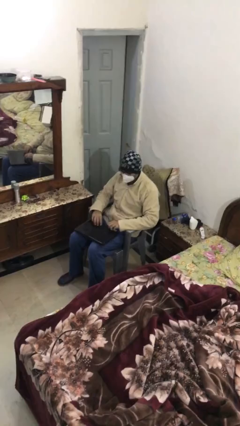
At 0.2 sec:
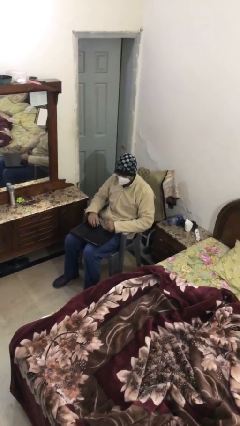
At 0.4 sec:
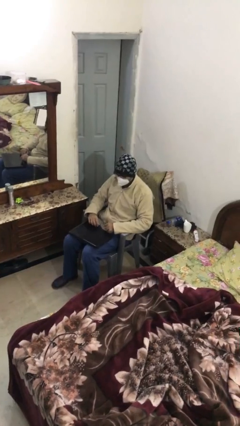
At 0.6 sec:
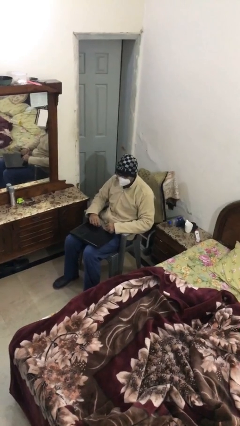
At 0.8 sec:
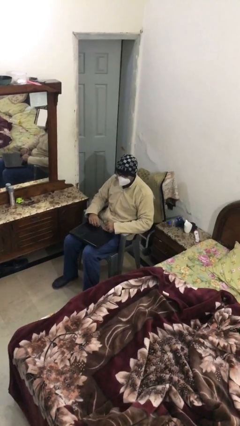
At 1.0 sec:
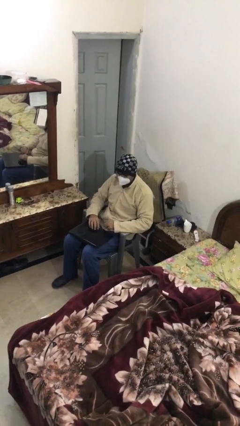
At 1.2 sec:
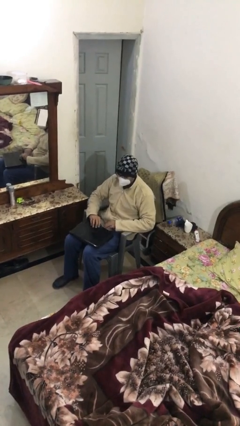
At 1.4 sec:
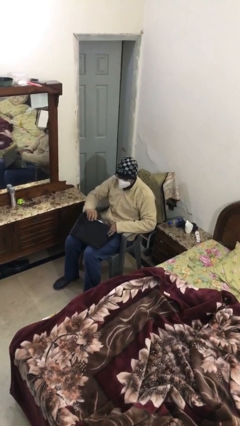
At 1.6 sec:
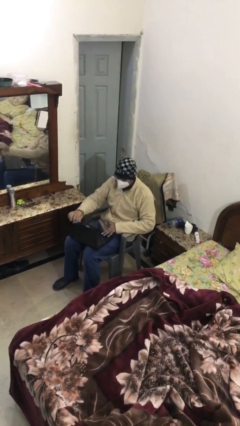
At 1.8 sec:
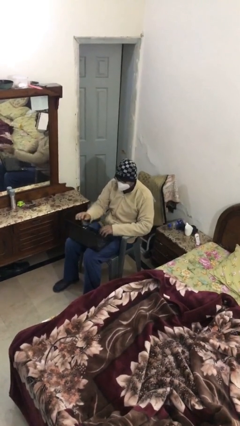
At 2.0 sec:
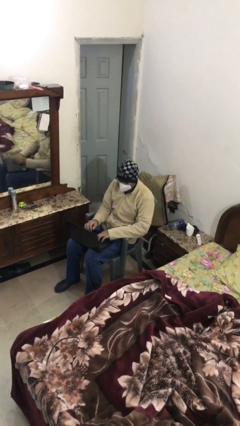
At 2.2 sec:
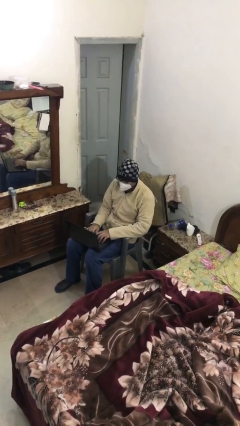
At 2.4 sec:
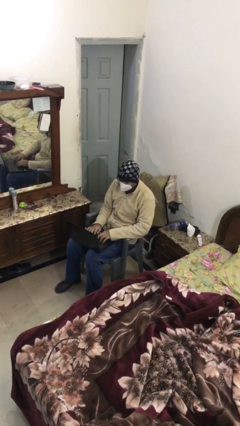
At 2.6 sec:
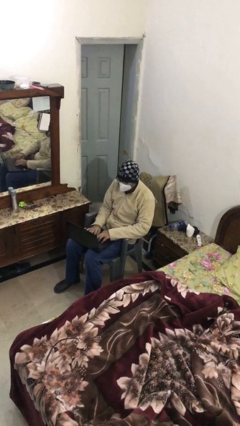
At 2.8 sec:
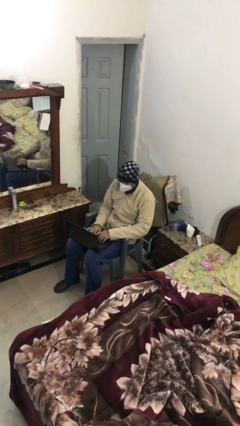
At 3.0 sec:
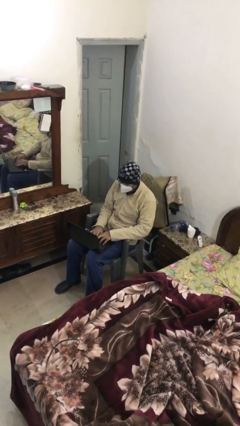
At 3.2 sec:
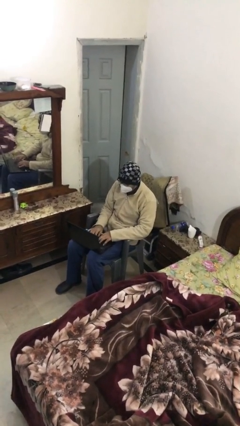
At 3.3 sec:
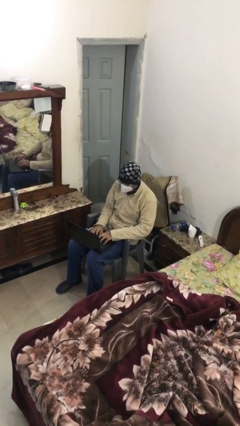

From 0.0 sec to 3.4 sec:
person interacts with laptop

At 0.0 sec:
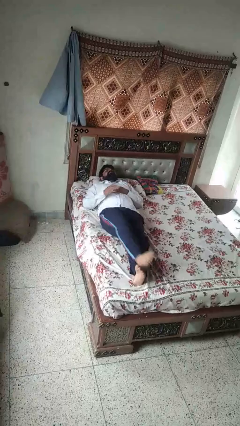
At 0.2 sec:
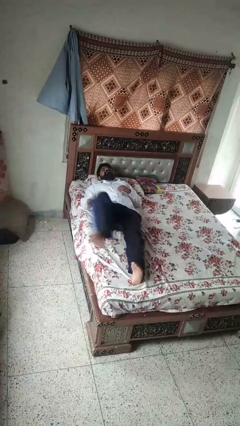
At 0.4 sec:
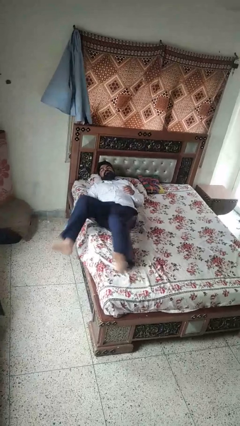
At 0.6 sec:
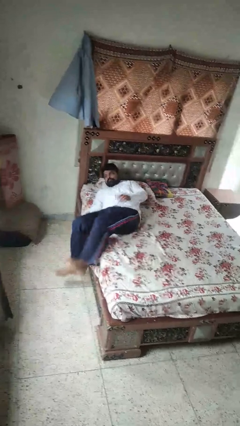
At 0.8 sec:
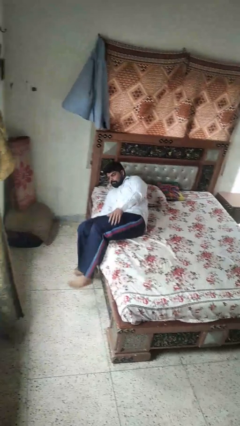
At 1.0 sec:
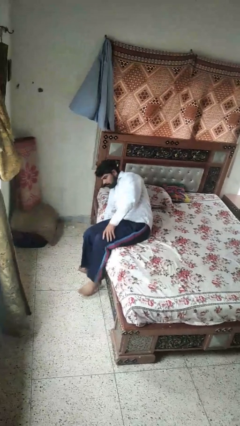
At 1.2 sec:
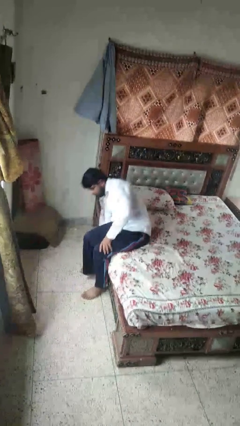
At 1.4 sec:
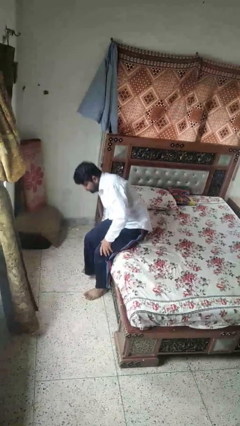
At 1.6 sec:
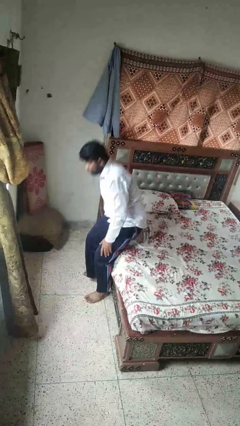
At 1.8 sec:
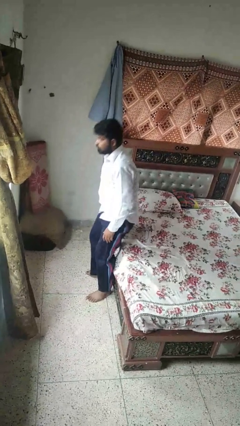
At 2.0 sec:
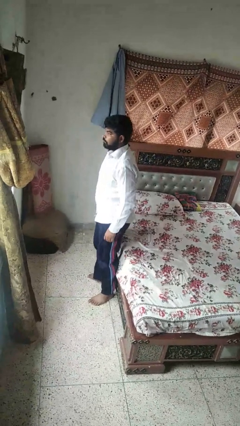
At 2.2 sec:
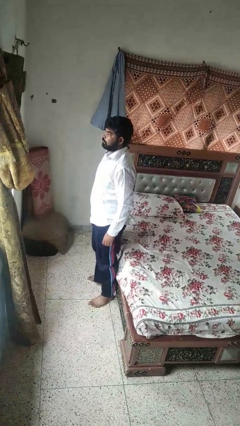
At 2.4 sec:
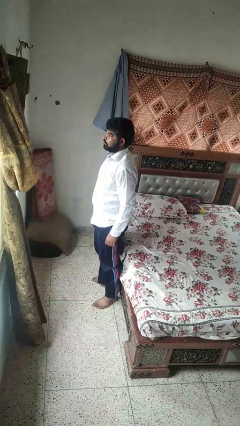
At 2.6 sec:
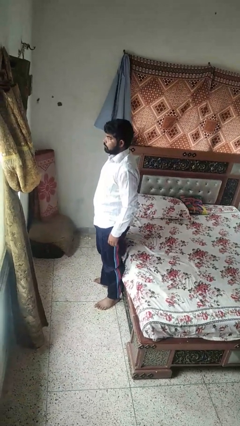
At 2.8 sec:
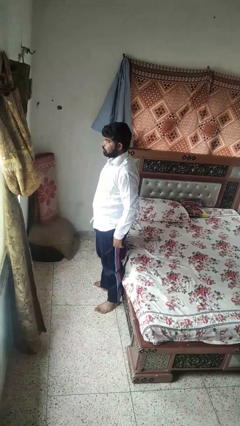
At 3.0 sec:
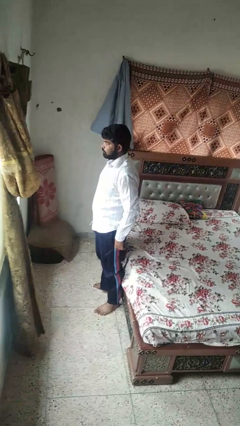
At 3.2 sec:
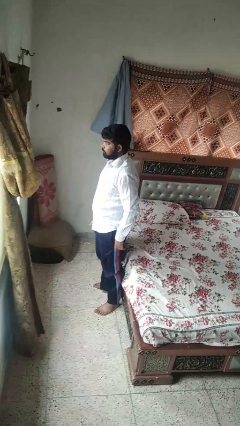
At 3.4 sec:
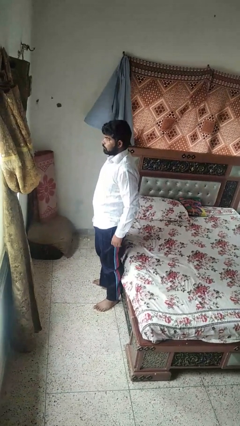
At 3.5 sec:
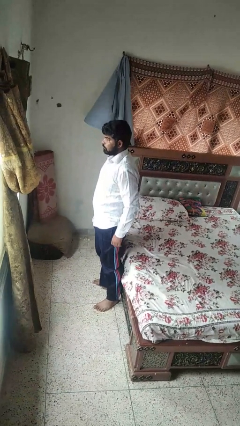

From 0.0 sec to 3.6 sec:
person stands up

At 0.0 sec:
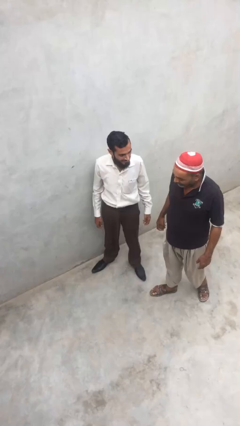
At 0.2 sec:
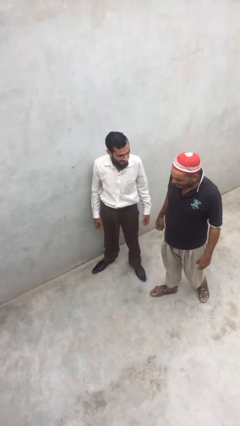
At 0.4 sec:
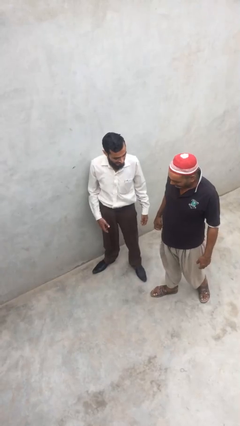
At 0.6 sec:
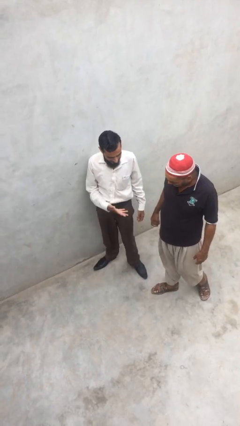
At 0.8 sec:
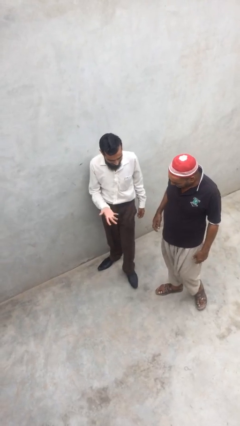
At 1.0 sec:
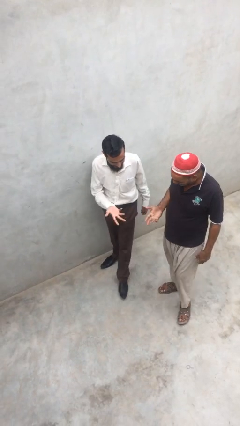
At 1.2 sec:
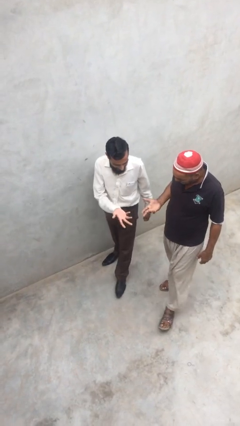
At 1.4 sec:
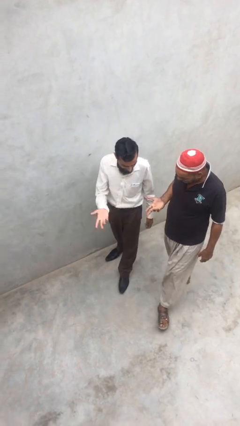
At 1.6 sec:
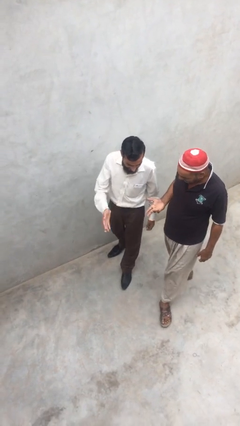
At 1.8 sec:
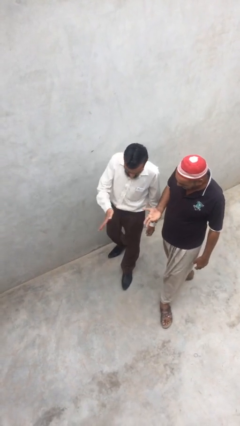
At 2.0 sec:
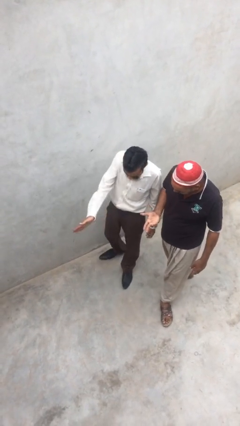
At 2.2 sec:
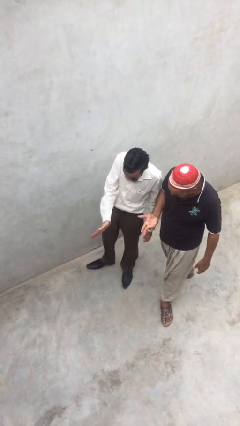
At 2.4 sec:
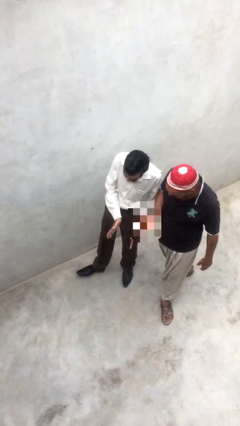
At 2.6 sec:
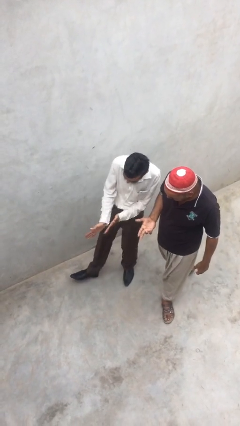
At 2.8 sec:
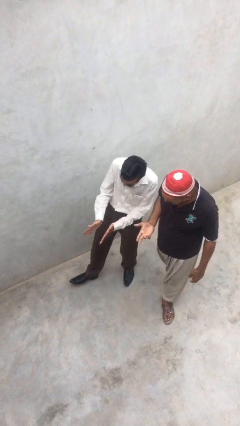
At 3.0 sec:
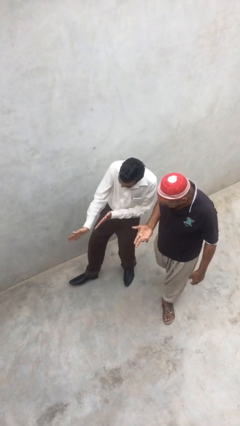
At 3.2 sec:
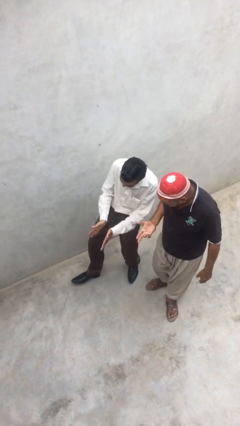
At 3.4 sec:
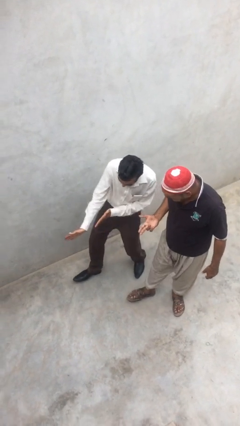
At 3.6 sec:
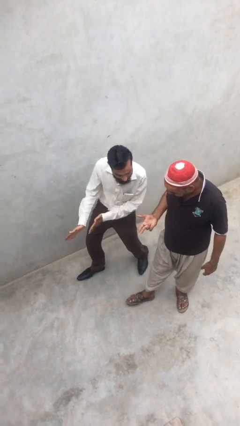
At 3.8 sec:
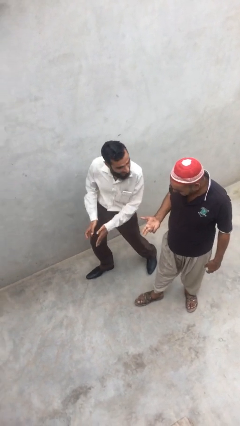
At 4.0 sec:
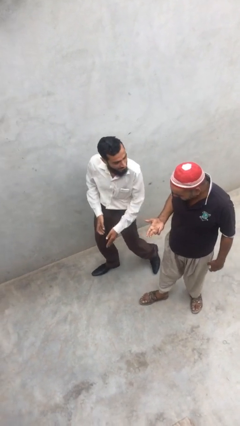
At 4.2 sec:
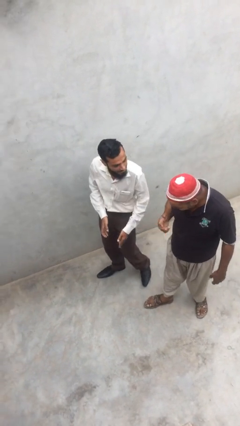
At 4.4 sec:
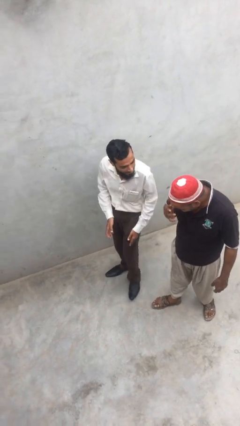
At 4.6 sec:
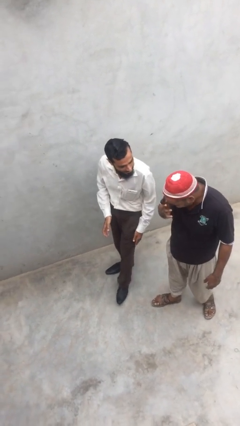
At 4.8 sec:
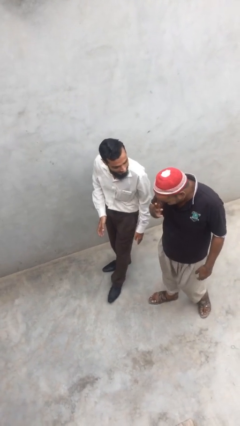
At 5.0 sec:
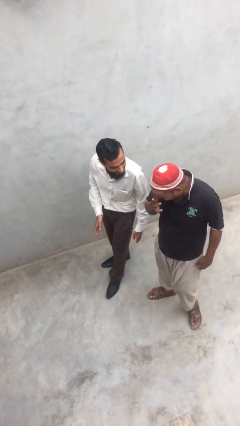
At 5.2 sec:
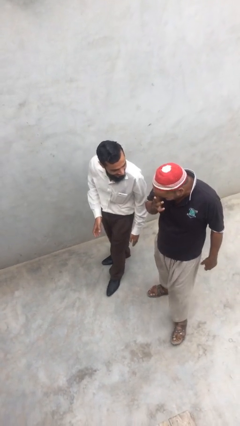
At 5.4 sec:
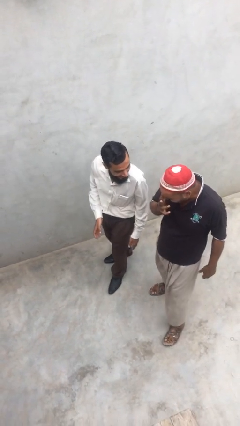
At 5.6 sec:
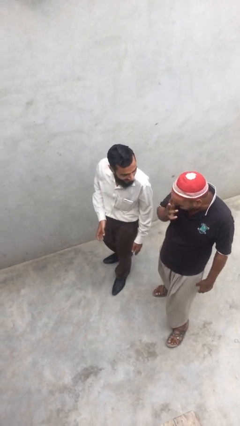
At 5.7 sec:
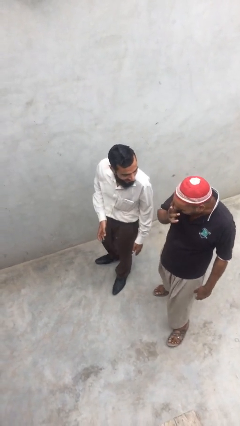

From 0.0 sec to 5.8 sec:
person talks to person

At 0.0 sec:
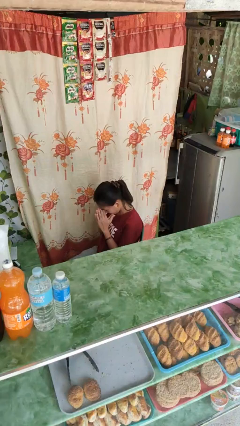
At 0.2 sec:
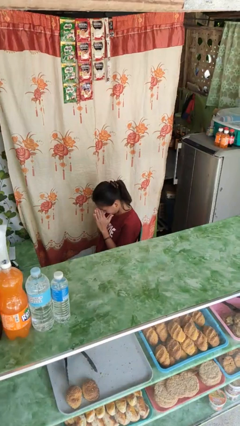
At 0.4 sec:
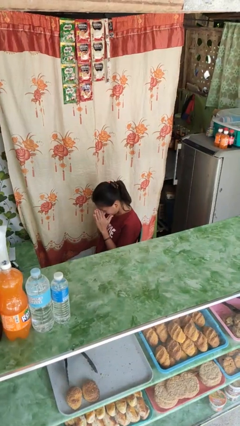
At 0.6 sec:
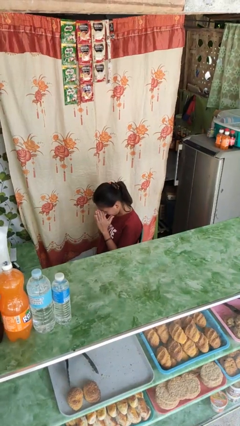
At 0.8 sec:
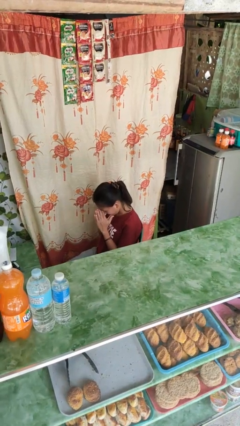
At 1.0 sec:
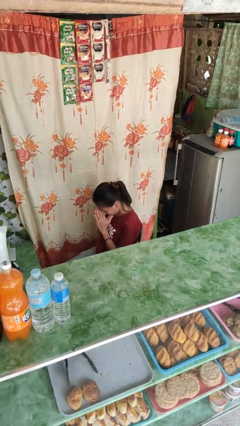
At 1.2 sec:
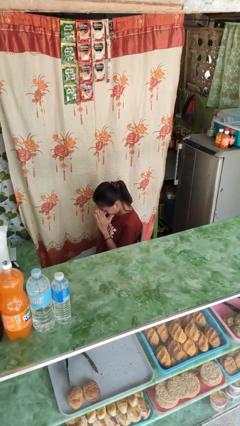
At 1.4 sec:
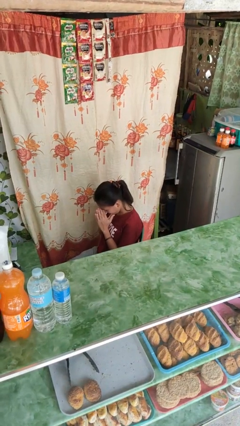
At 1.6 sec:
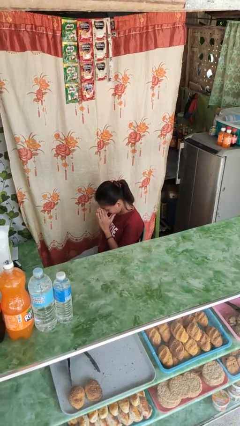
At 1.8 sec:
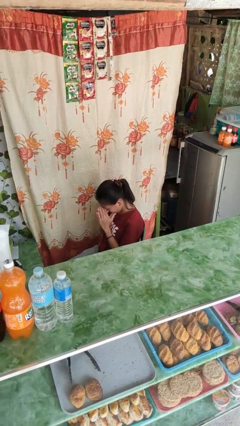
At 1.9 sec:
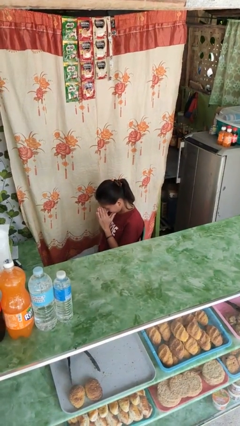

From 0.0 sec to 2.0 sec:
person rubs eyes

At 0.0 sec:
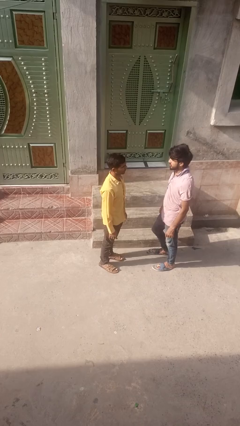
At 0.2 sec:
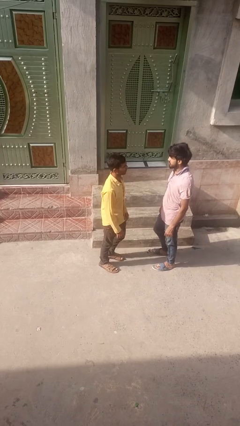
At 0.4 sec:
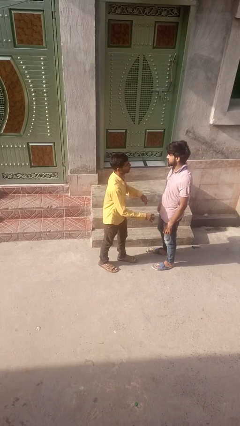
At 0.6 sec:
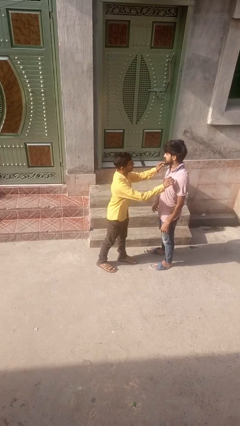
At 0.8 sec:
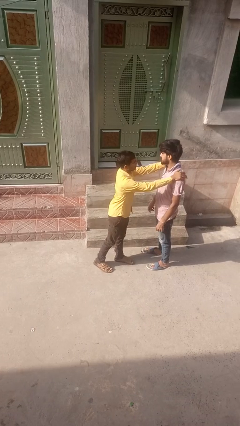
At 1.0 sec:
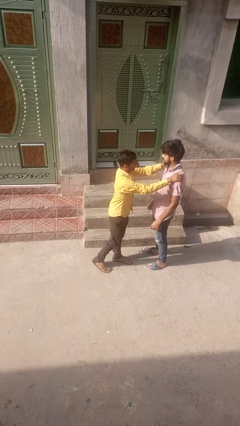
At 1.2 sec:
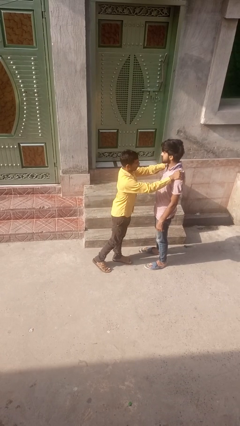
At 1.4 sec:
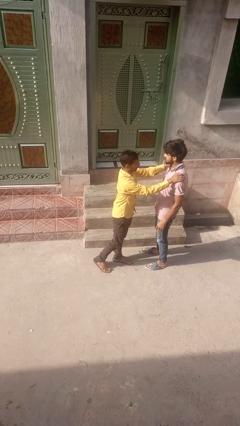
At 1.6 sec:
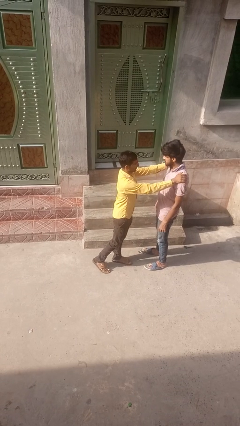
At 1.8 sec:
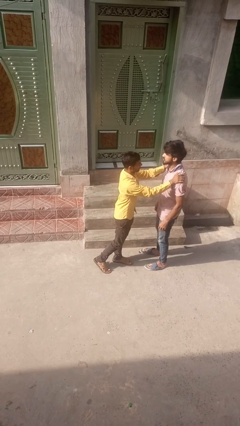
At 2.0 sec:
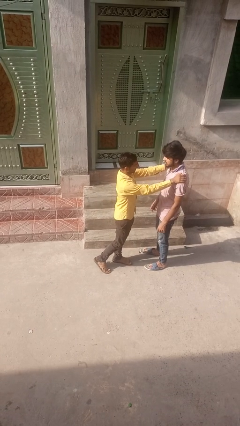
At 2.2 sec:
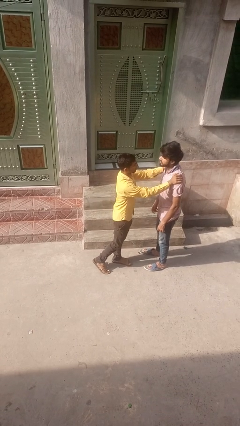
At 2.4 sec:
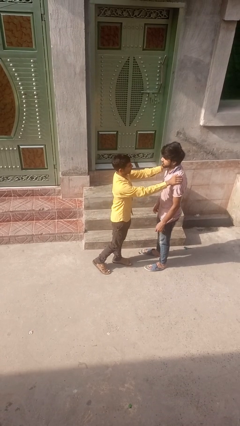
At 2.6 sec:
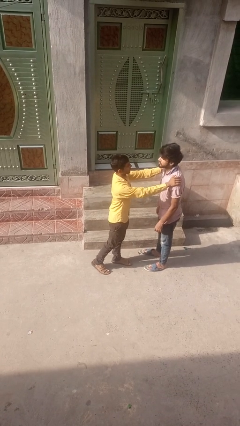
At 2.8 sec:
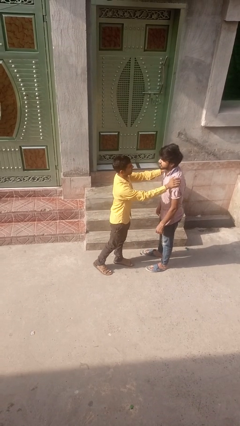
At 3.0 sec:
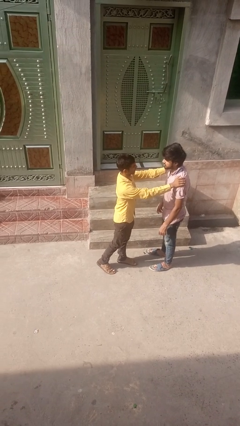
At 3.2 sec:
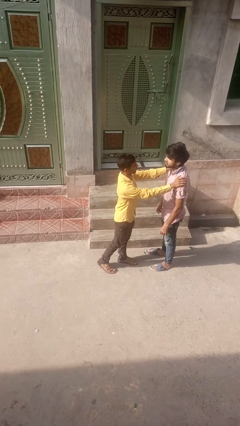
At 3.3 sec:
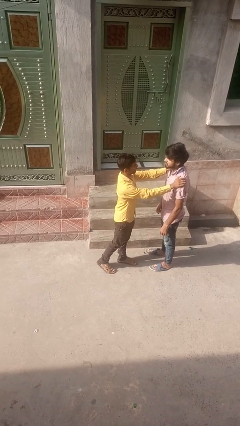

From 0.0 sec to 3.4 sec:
person grabs person by bicep
